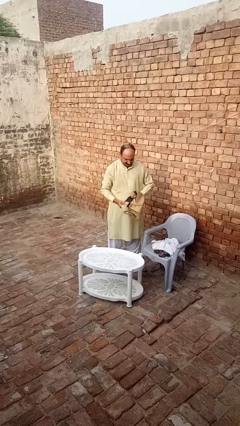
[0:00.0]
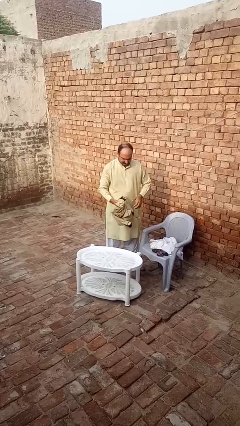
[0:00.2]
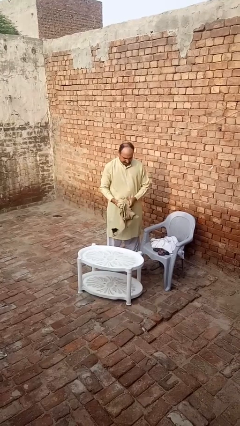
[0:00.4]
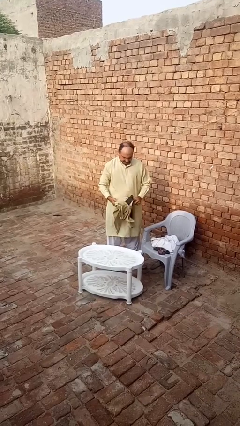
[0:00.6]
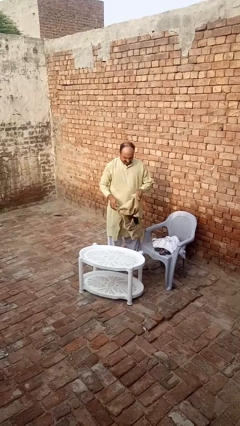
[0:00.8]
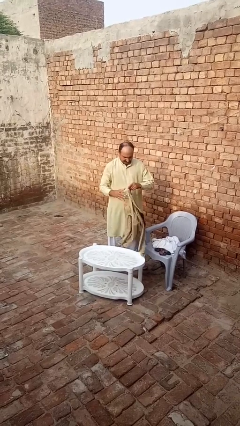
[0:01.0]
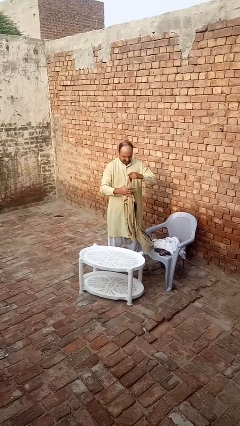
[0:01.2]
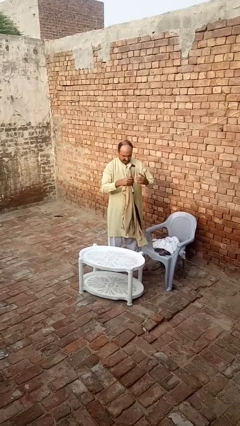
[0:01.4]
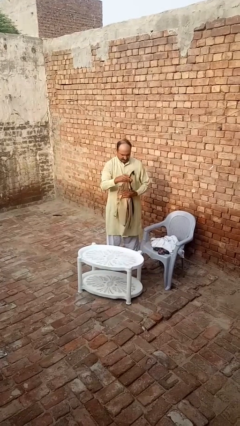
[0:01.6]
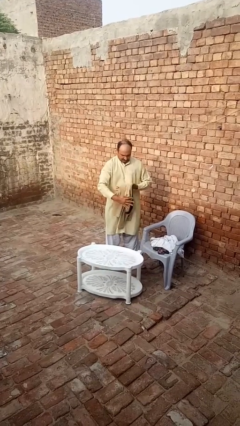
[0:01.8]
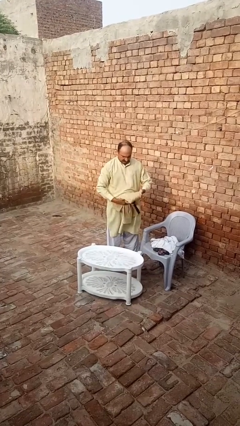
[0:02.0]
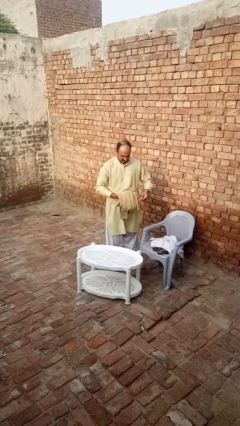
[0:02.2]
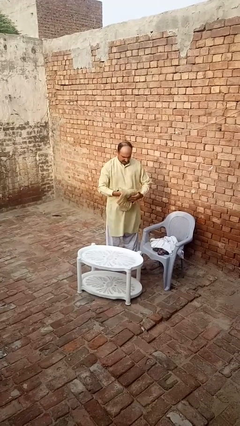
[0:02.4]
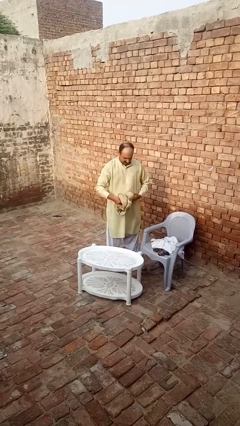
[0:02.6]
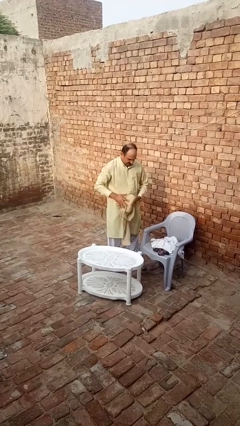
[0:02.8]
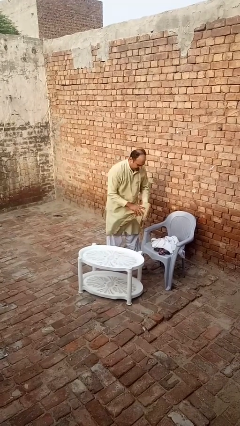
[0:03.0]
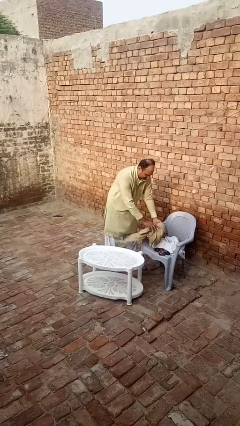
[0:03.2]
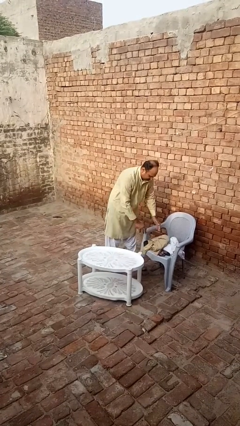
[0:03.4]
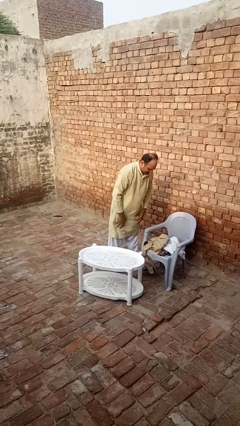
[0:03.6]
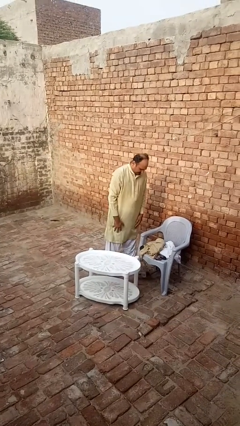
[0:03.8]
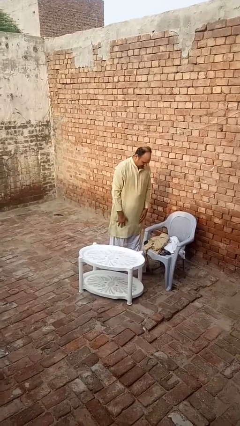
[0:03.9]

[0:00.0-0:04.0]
person folds shirt

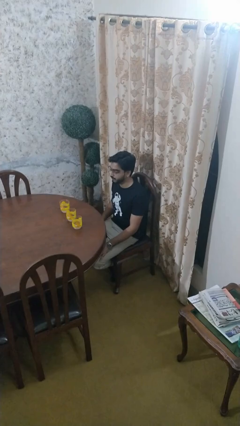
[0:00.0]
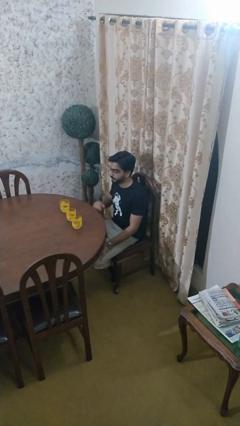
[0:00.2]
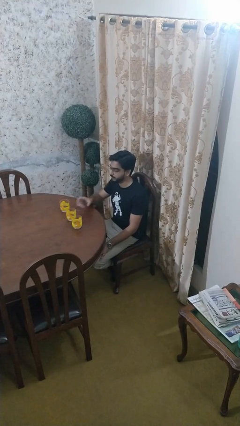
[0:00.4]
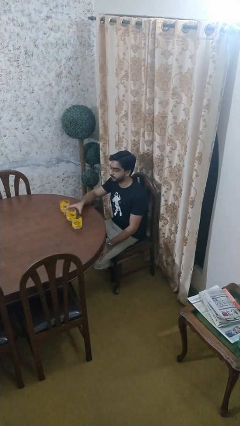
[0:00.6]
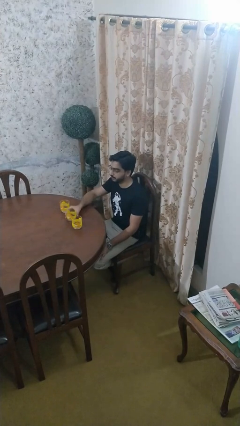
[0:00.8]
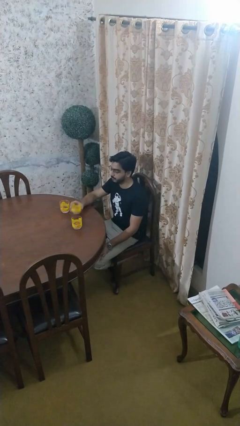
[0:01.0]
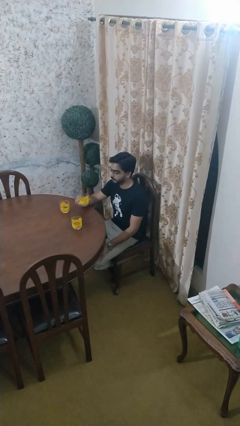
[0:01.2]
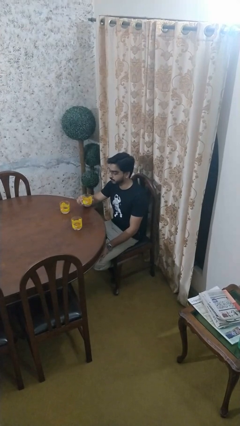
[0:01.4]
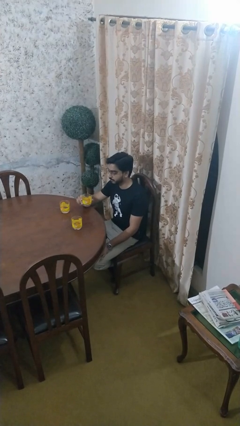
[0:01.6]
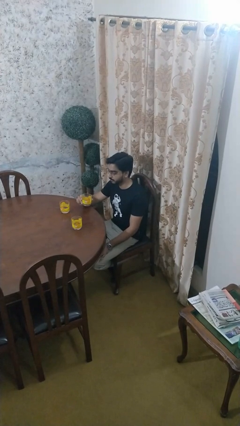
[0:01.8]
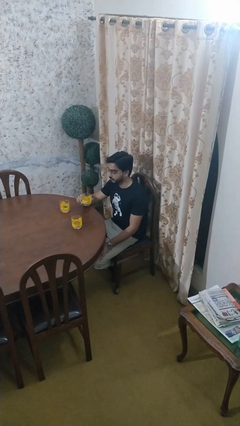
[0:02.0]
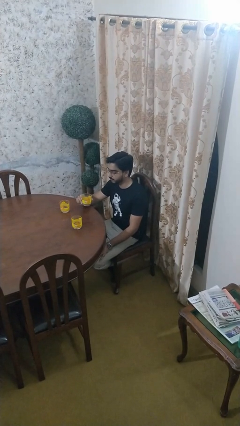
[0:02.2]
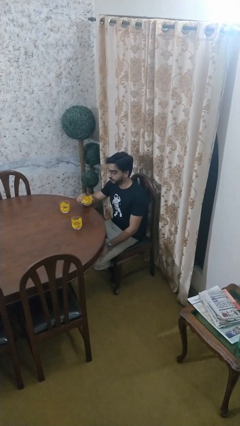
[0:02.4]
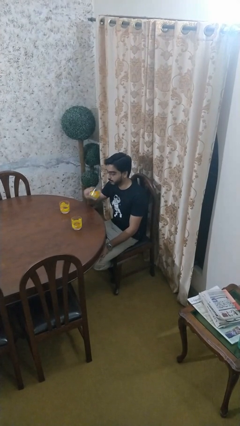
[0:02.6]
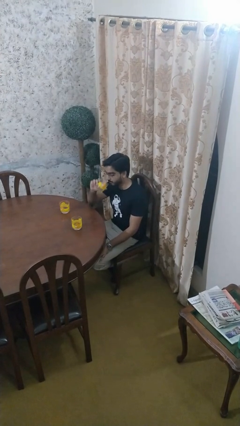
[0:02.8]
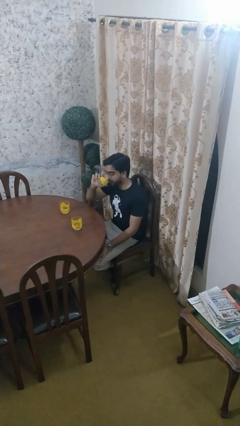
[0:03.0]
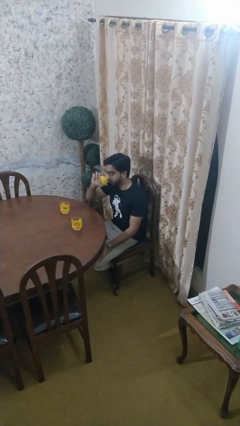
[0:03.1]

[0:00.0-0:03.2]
person picks up object from table

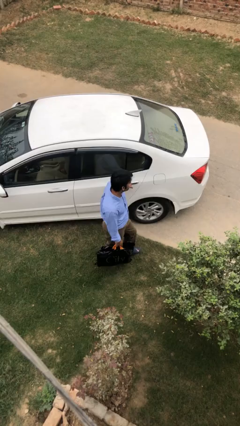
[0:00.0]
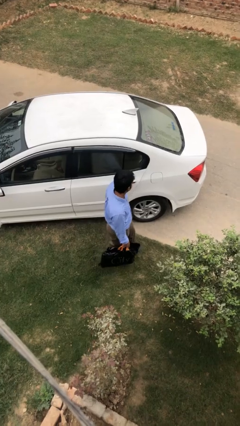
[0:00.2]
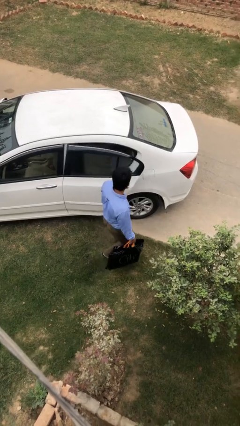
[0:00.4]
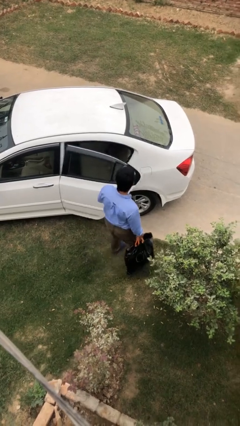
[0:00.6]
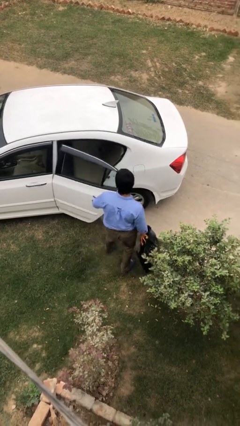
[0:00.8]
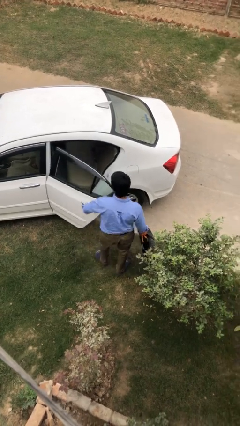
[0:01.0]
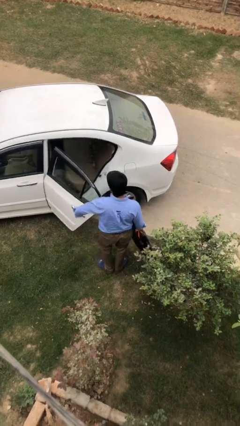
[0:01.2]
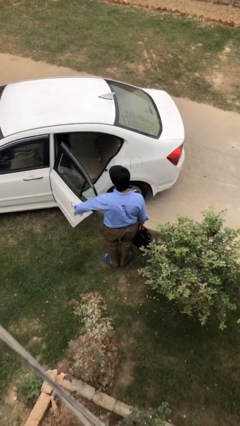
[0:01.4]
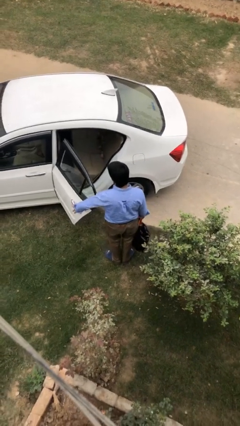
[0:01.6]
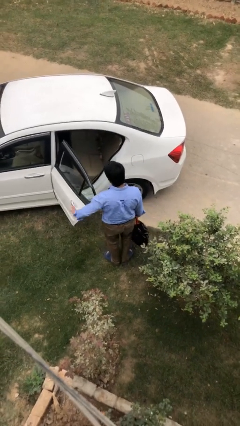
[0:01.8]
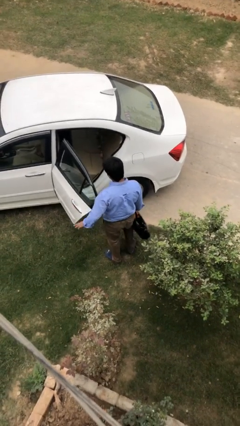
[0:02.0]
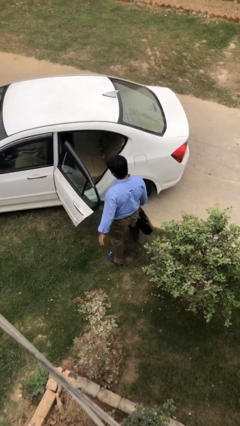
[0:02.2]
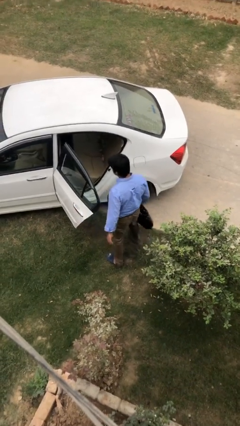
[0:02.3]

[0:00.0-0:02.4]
person opens car door

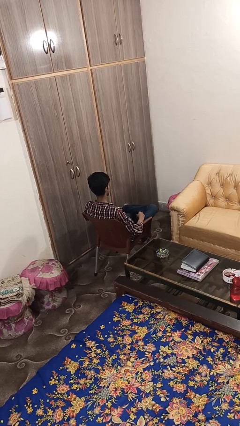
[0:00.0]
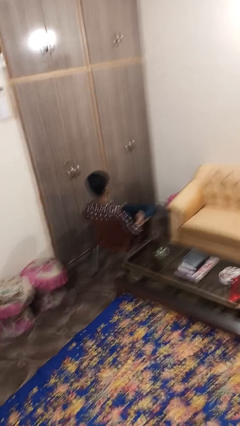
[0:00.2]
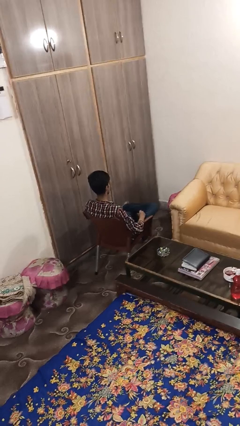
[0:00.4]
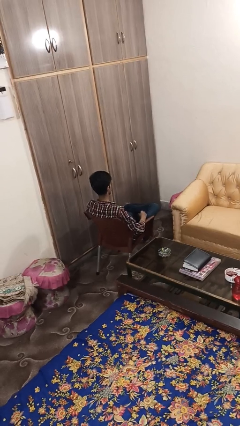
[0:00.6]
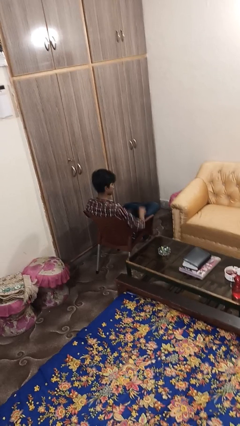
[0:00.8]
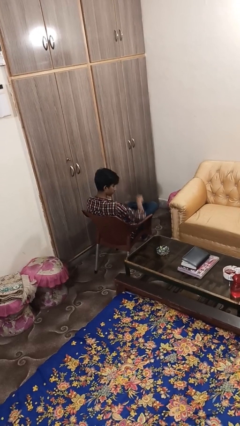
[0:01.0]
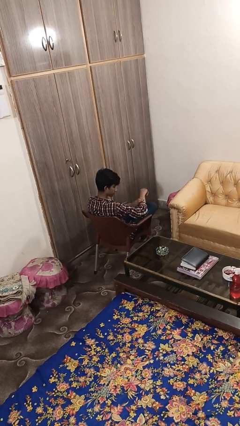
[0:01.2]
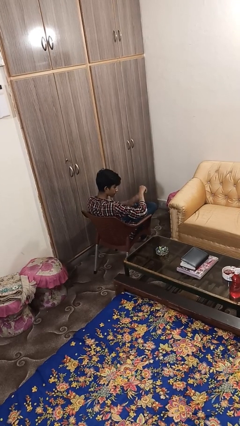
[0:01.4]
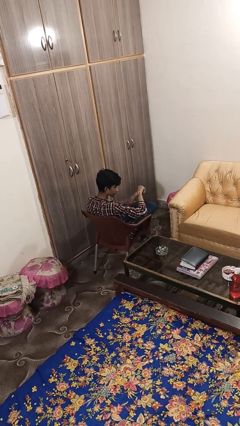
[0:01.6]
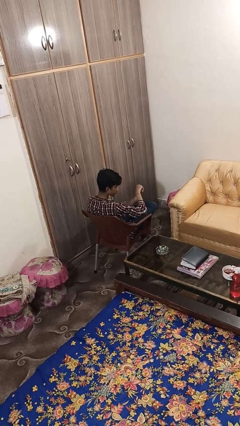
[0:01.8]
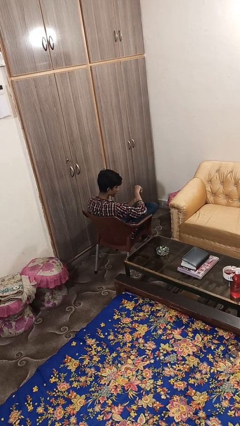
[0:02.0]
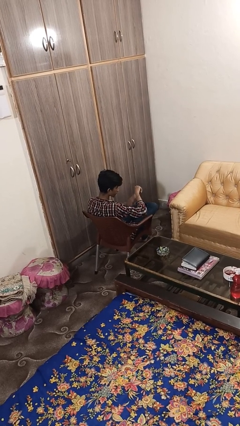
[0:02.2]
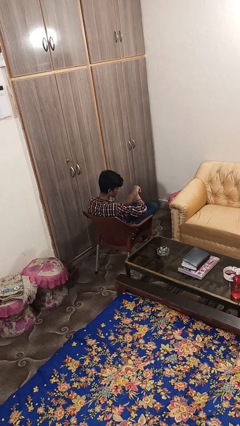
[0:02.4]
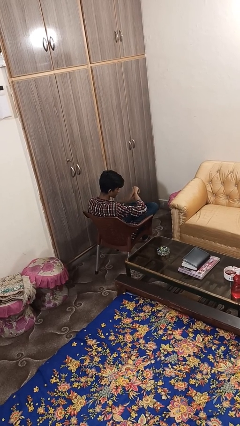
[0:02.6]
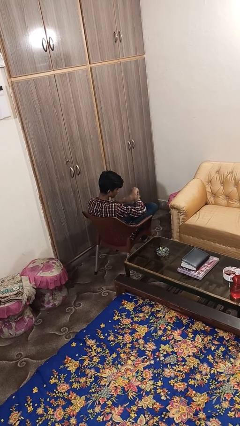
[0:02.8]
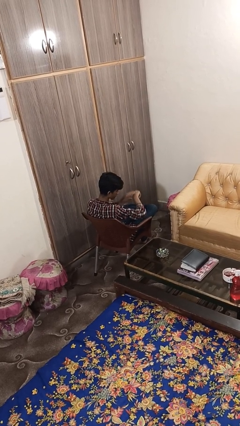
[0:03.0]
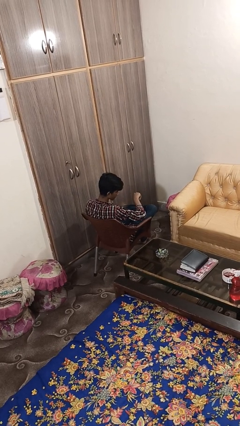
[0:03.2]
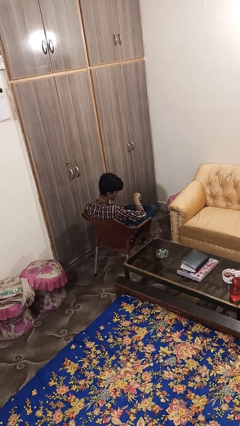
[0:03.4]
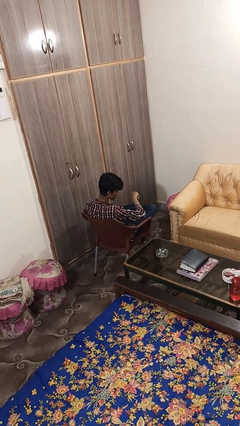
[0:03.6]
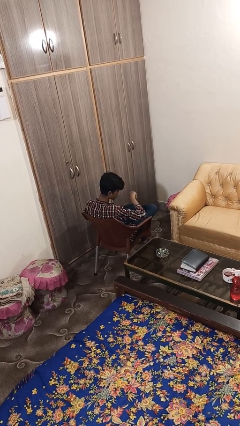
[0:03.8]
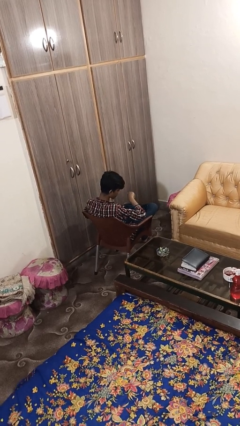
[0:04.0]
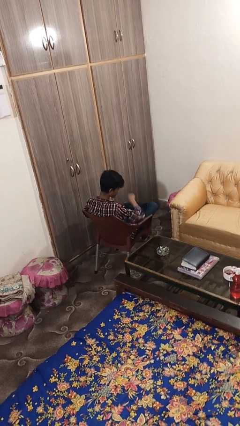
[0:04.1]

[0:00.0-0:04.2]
person swats bug

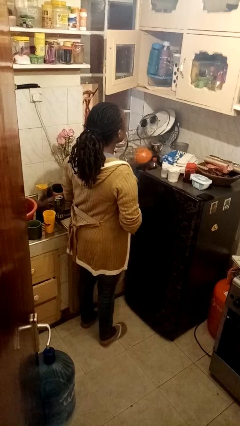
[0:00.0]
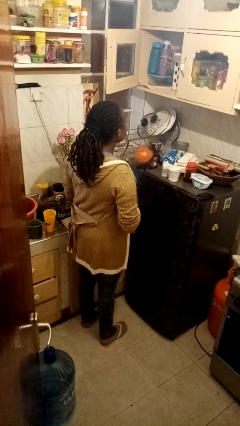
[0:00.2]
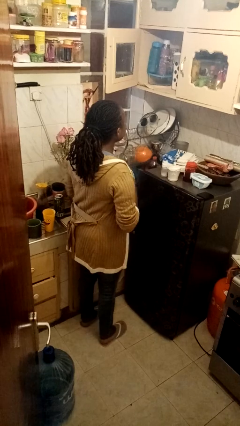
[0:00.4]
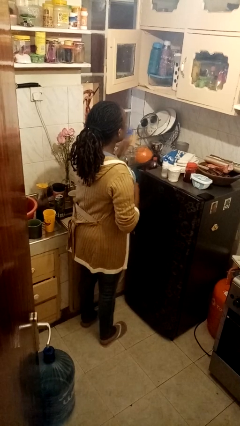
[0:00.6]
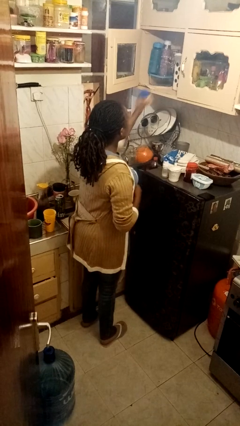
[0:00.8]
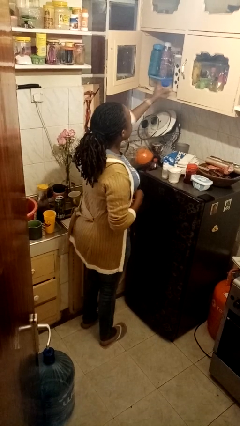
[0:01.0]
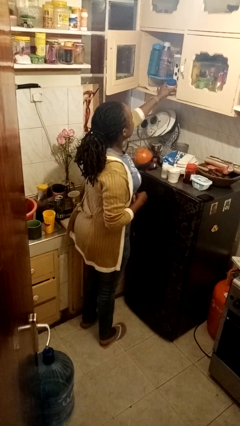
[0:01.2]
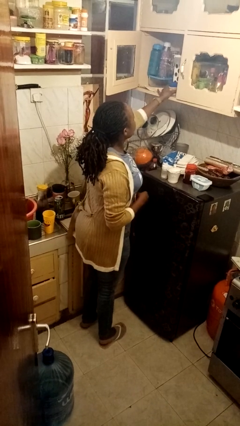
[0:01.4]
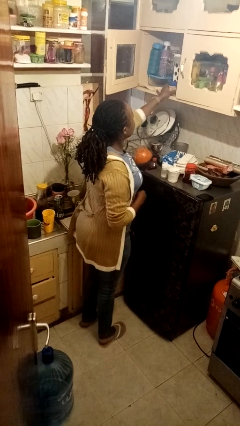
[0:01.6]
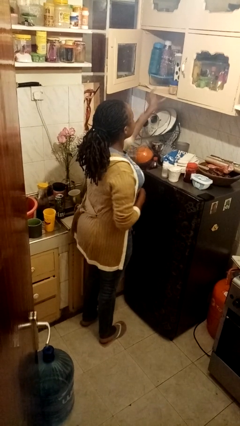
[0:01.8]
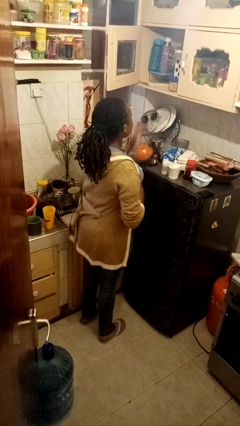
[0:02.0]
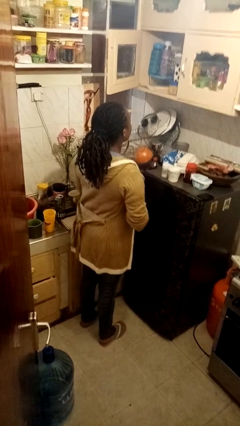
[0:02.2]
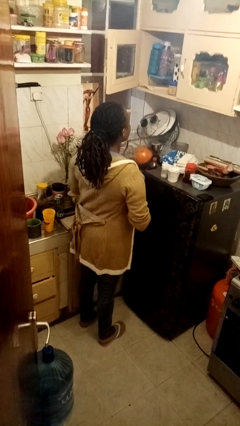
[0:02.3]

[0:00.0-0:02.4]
person puts down object into cabinet

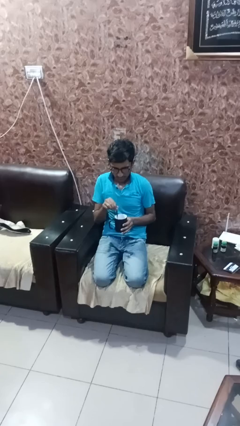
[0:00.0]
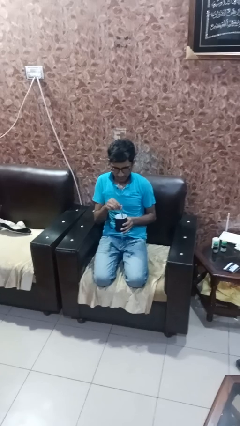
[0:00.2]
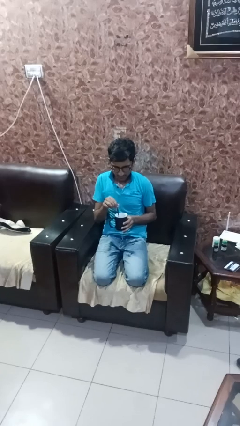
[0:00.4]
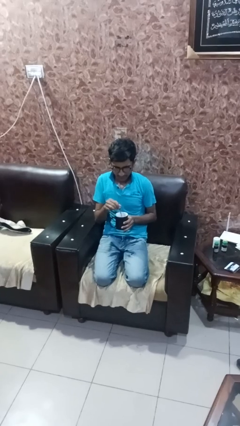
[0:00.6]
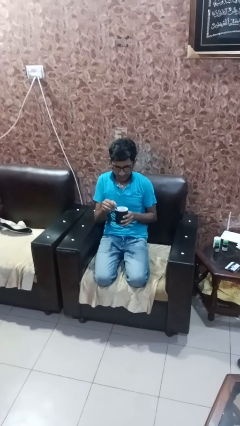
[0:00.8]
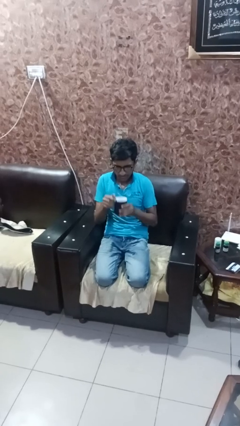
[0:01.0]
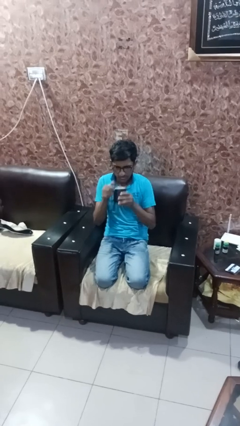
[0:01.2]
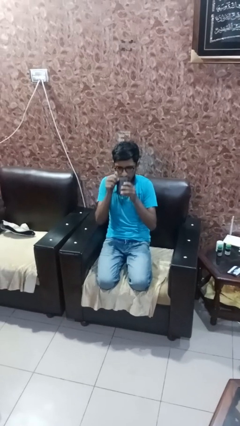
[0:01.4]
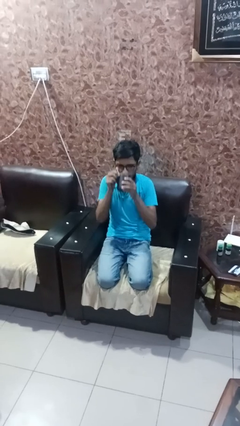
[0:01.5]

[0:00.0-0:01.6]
person stirs mug
